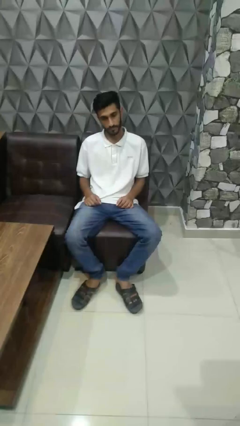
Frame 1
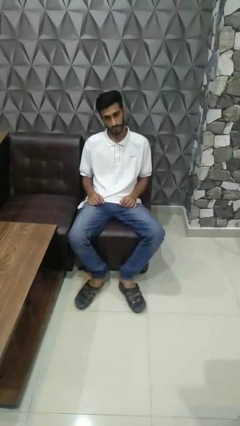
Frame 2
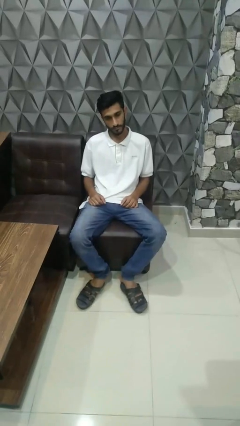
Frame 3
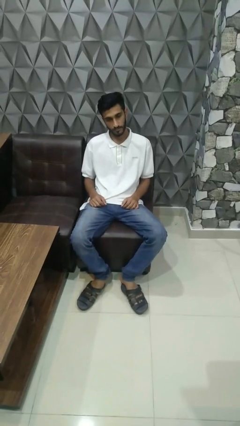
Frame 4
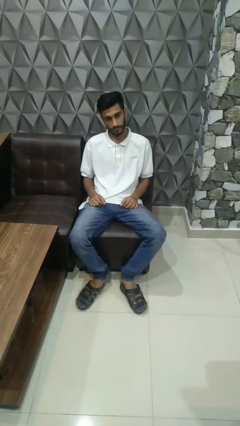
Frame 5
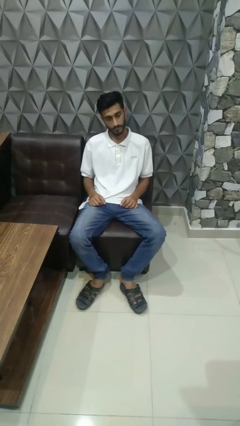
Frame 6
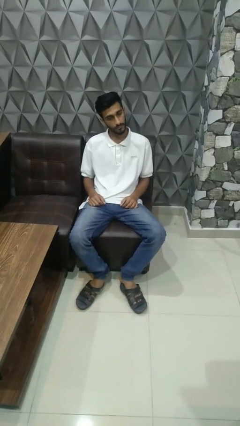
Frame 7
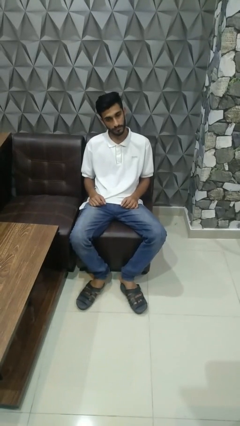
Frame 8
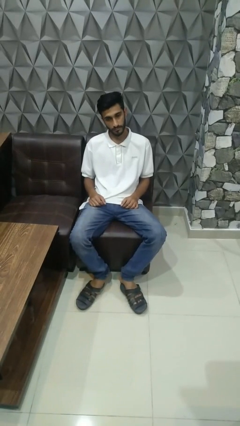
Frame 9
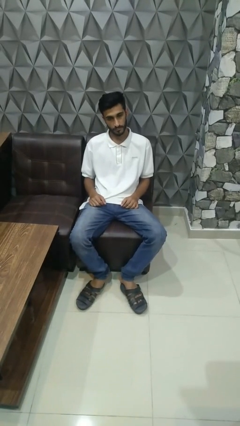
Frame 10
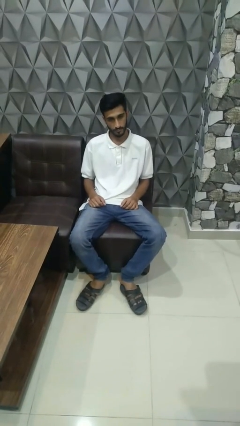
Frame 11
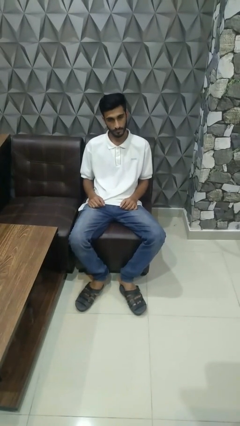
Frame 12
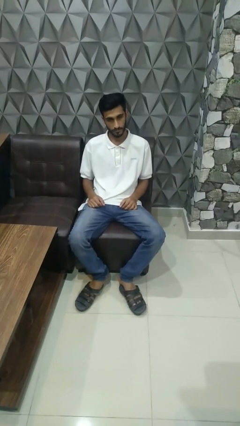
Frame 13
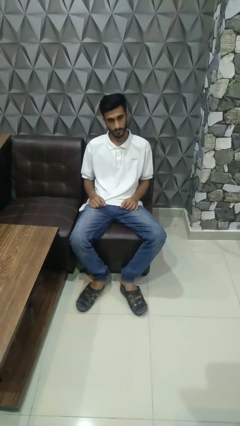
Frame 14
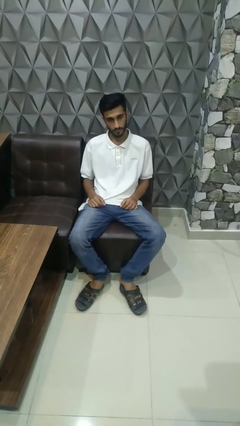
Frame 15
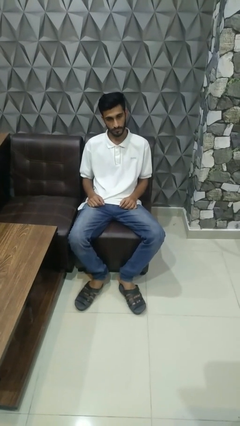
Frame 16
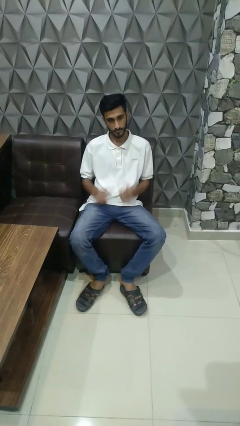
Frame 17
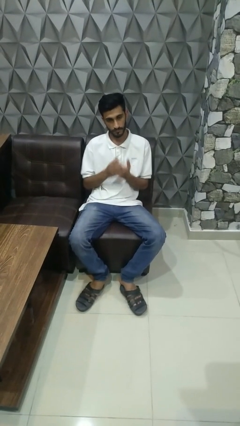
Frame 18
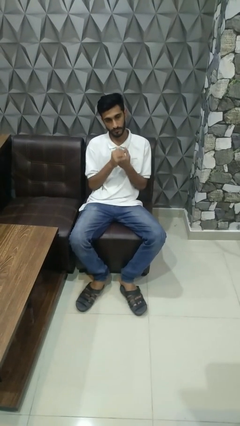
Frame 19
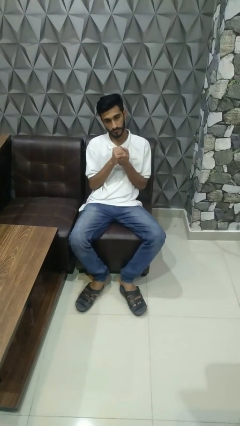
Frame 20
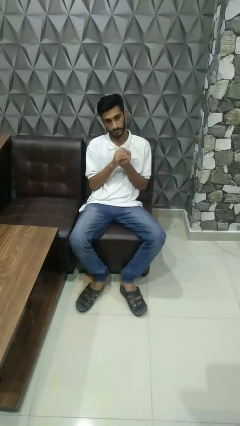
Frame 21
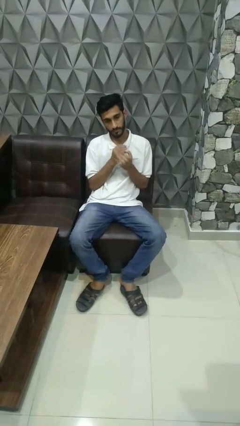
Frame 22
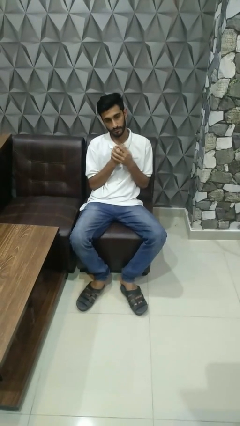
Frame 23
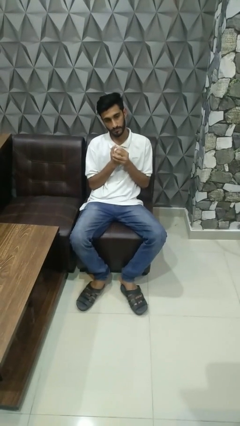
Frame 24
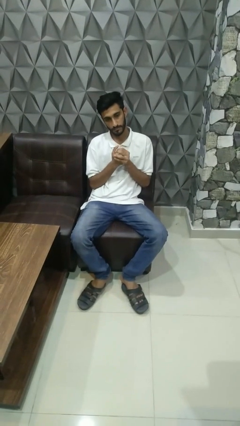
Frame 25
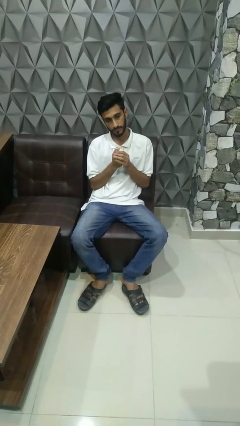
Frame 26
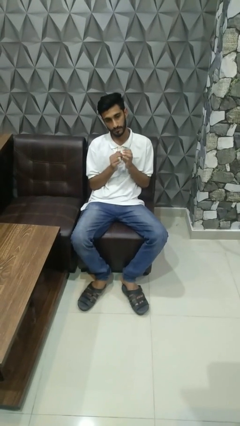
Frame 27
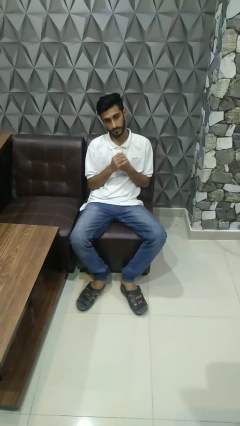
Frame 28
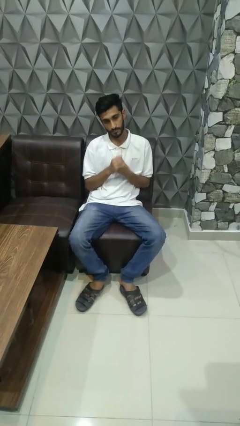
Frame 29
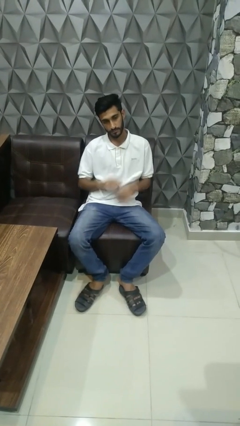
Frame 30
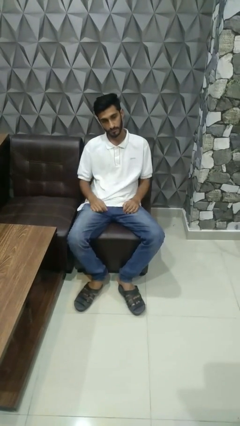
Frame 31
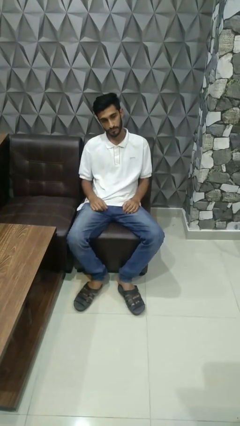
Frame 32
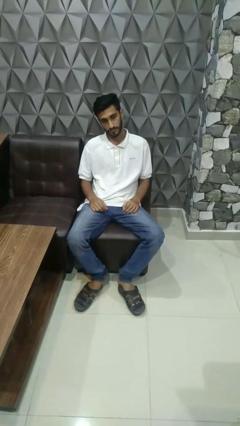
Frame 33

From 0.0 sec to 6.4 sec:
person cracks knuckles

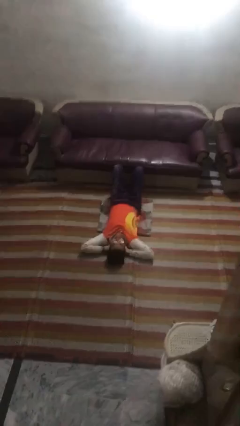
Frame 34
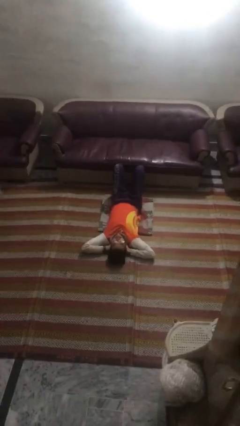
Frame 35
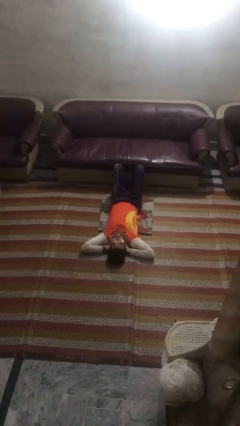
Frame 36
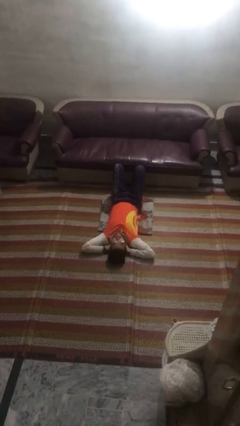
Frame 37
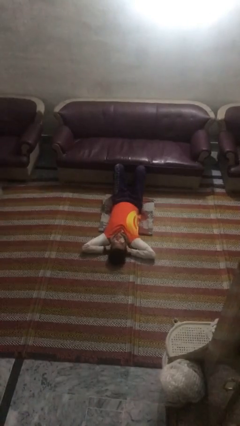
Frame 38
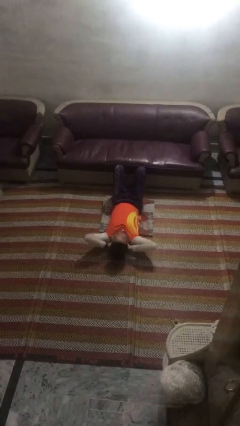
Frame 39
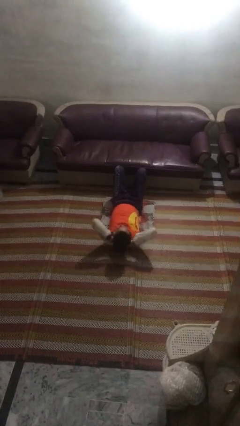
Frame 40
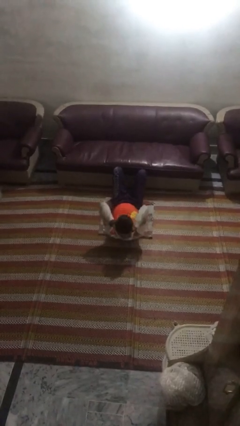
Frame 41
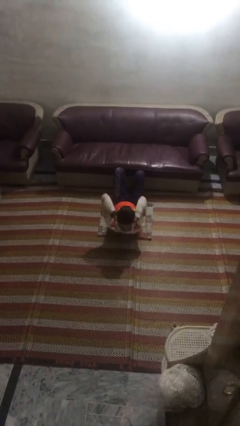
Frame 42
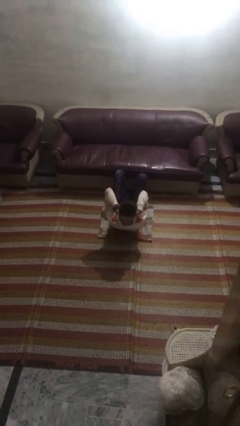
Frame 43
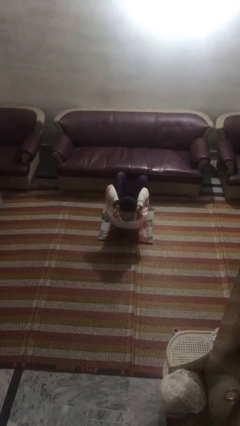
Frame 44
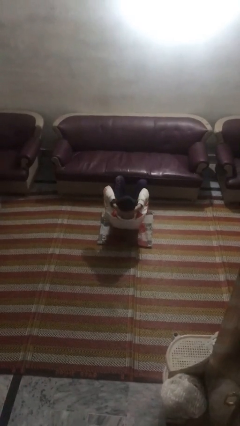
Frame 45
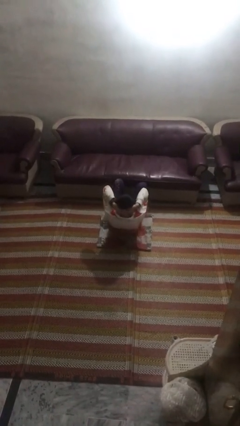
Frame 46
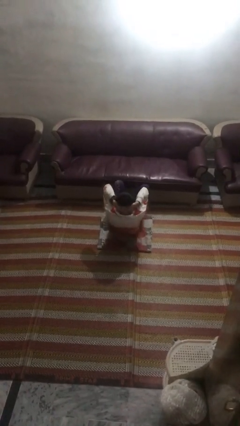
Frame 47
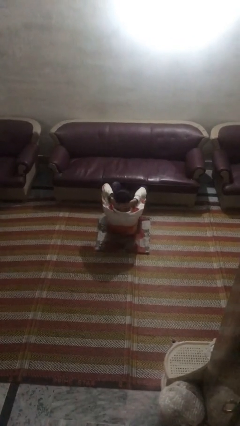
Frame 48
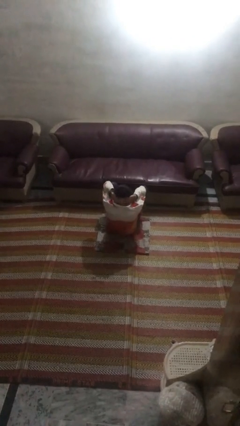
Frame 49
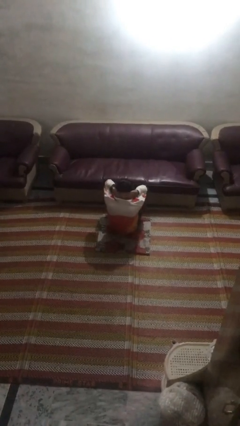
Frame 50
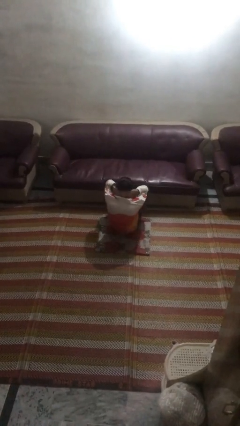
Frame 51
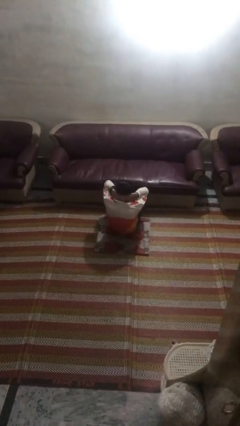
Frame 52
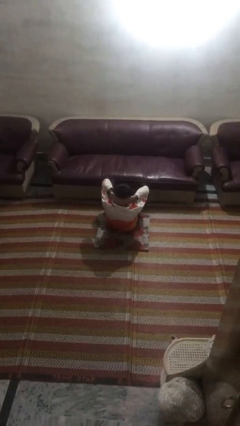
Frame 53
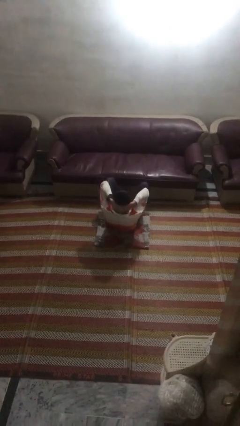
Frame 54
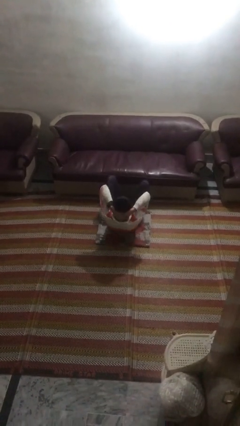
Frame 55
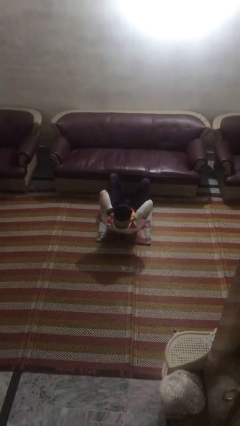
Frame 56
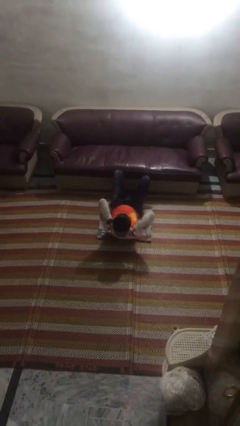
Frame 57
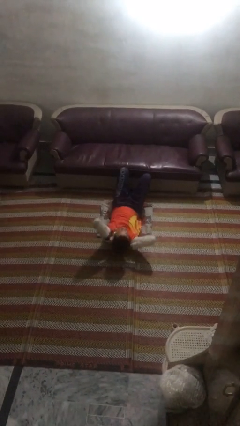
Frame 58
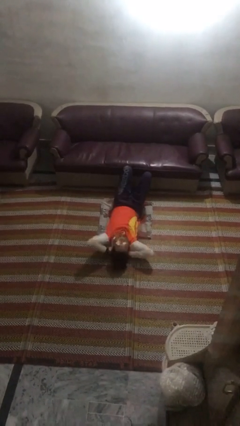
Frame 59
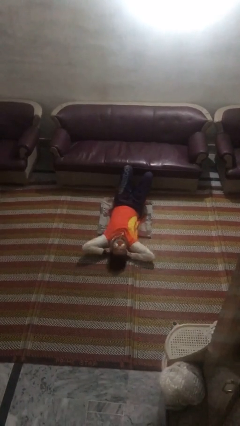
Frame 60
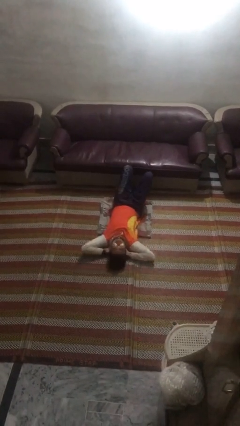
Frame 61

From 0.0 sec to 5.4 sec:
person exercises with situp

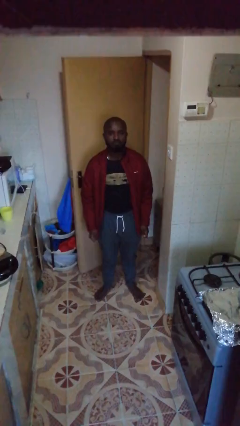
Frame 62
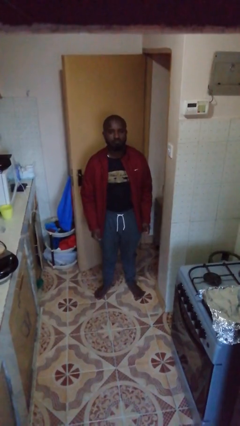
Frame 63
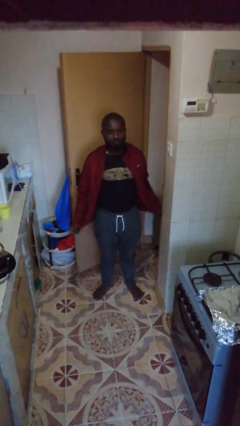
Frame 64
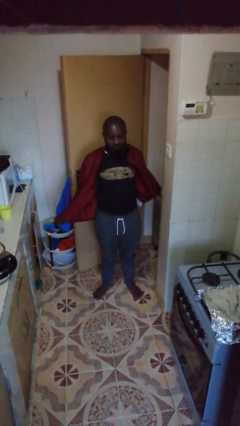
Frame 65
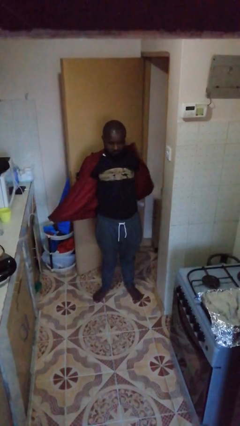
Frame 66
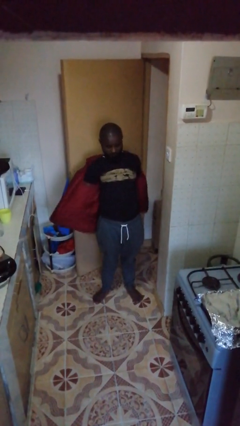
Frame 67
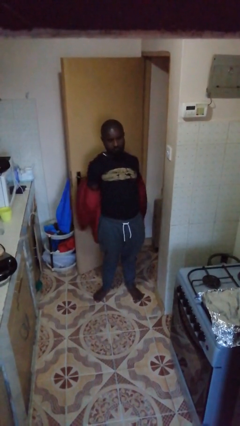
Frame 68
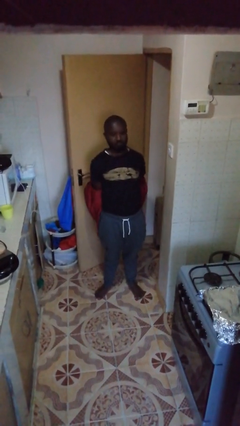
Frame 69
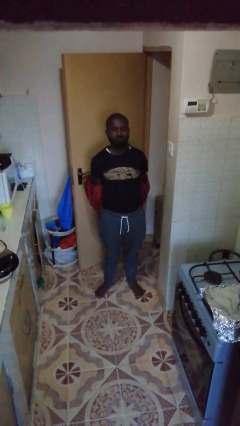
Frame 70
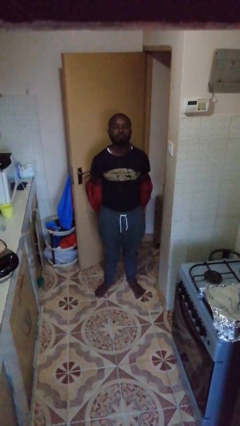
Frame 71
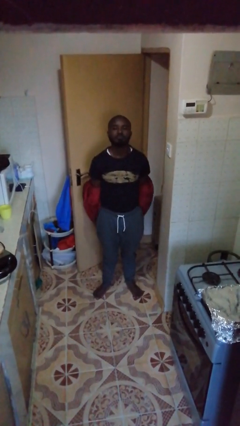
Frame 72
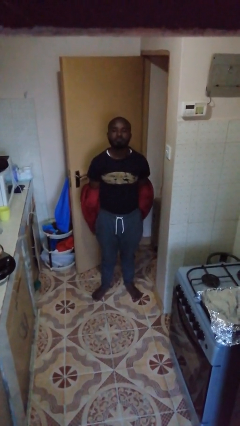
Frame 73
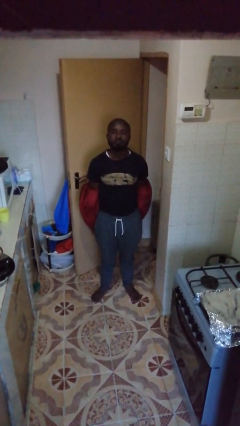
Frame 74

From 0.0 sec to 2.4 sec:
person takes off jacket

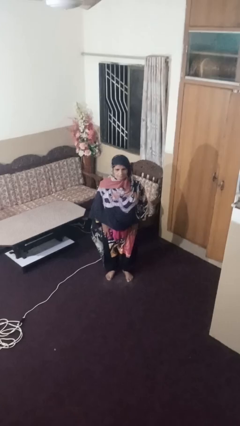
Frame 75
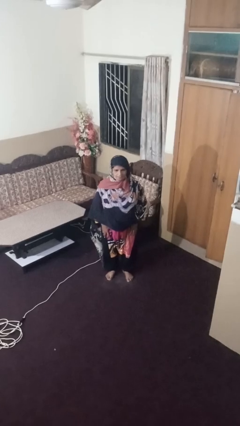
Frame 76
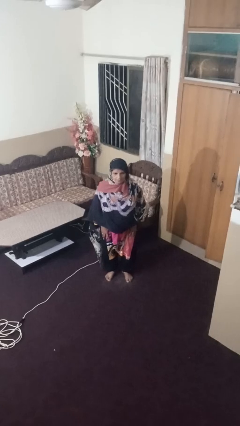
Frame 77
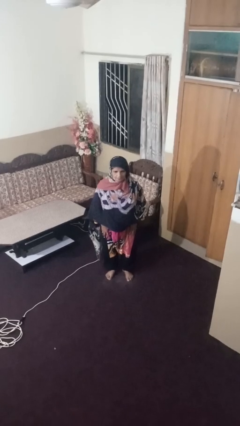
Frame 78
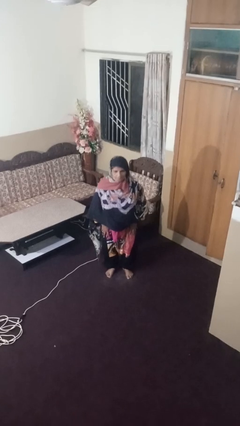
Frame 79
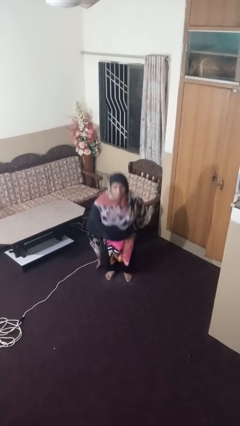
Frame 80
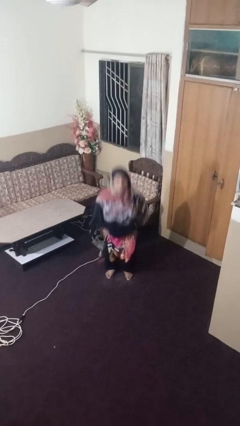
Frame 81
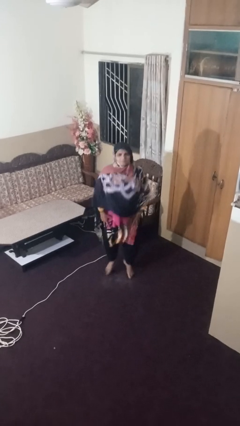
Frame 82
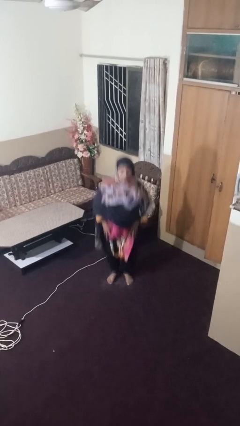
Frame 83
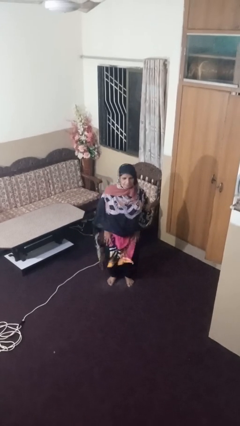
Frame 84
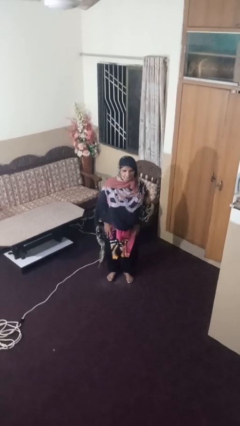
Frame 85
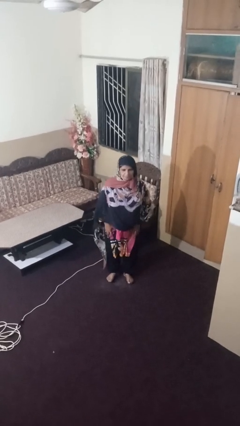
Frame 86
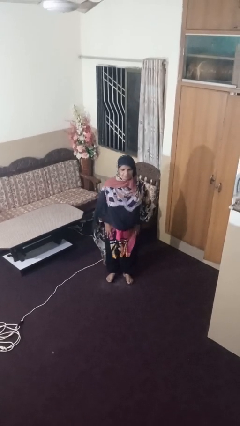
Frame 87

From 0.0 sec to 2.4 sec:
person jumps

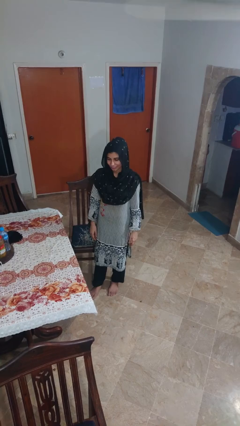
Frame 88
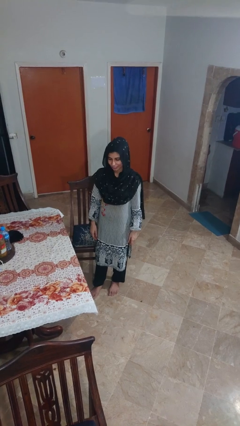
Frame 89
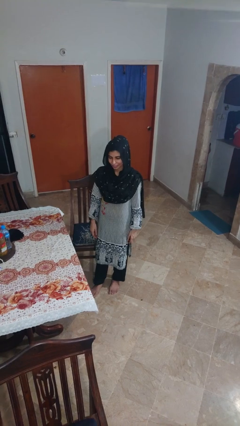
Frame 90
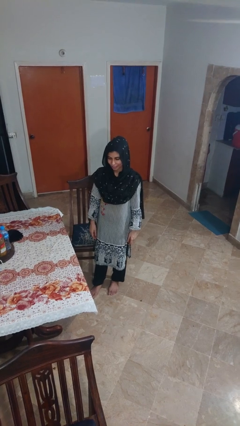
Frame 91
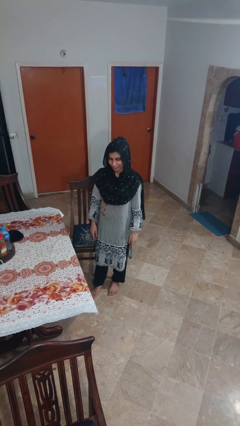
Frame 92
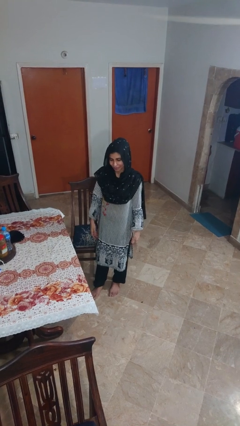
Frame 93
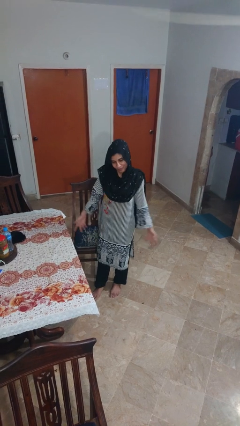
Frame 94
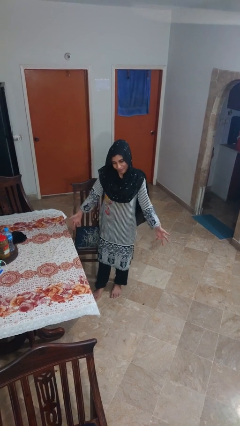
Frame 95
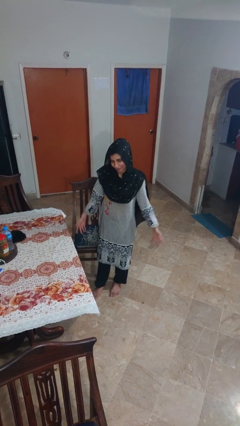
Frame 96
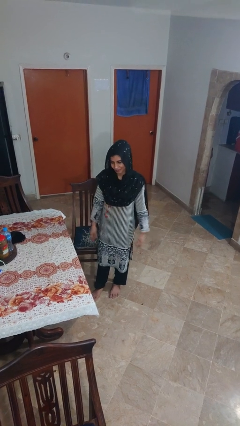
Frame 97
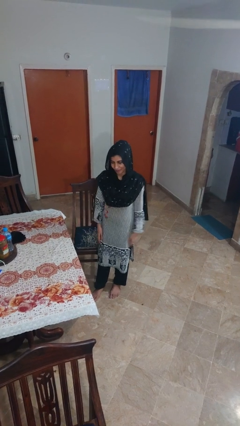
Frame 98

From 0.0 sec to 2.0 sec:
person shrugs
